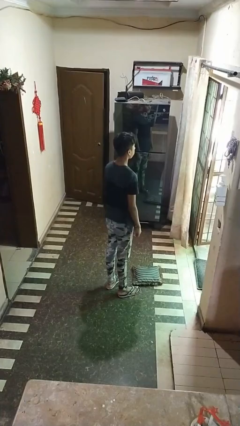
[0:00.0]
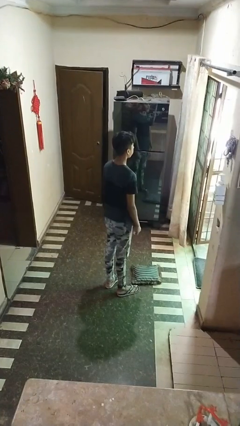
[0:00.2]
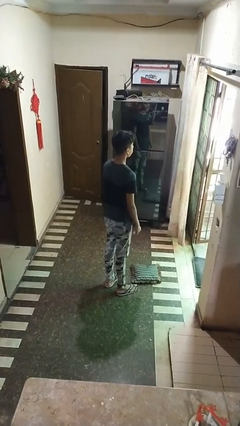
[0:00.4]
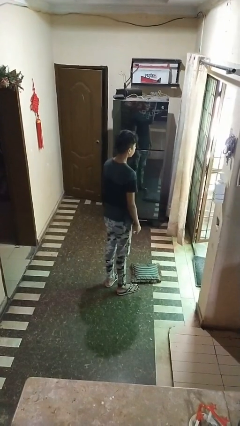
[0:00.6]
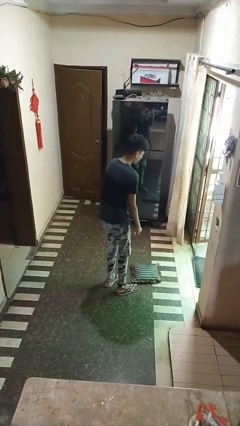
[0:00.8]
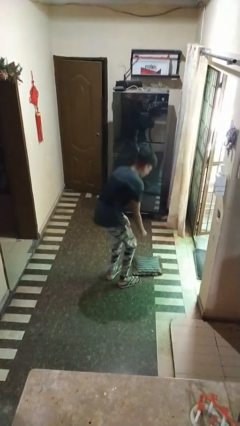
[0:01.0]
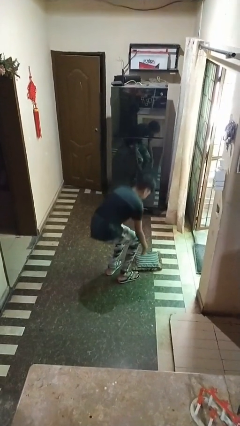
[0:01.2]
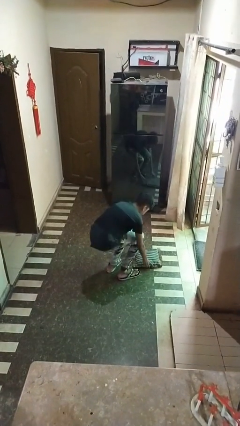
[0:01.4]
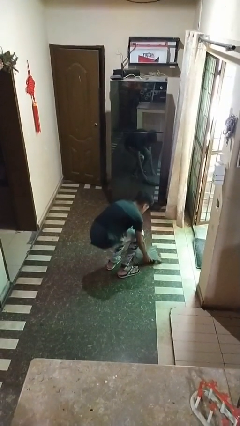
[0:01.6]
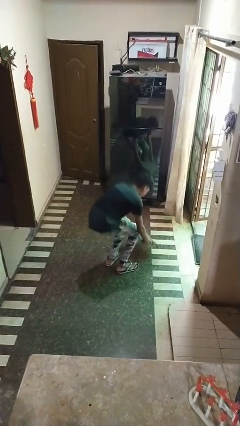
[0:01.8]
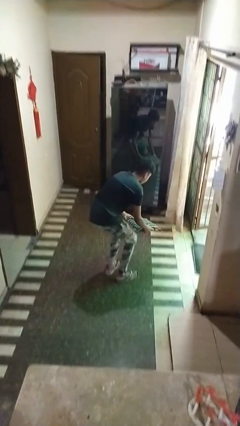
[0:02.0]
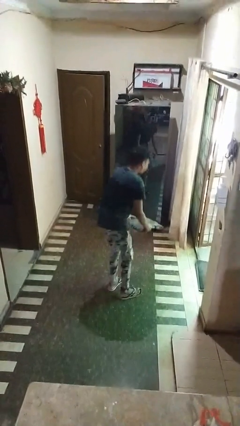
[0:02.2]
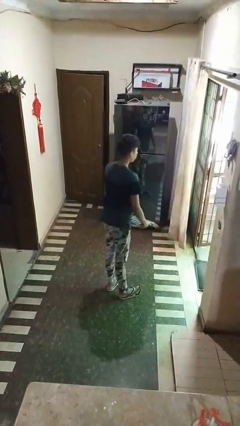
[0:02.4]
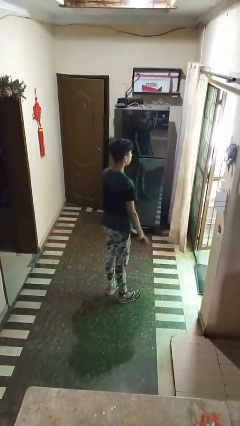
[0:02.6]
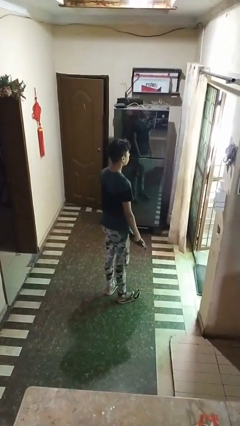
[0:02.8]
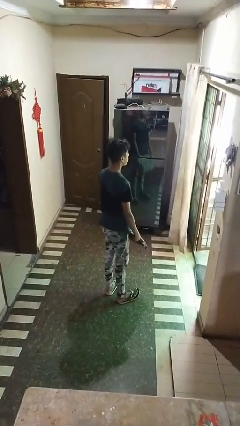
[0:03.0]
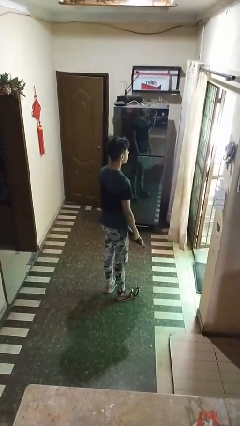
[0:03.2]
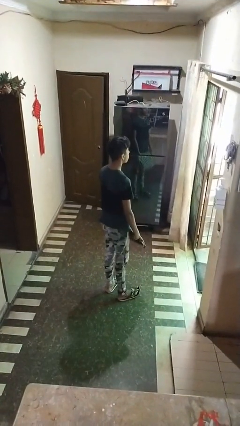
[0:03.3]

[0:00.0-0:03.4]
person picks up object from floor

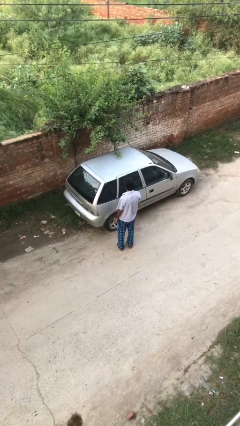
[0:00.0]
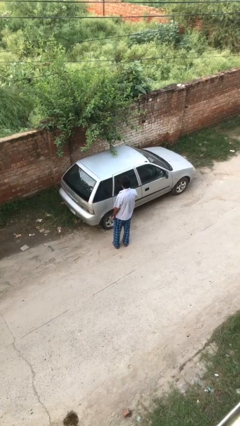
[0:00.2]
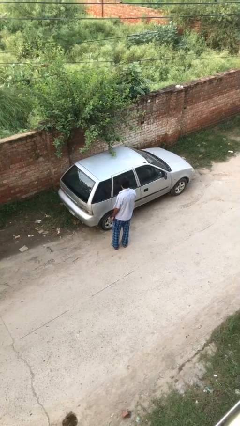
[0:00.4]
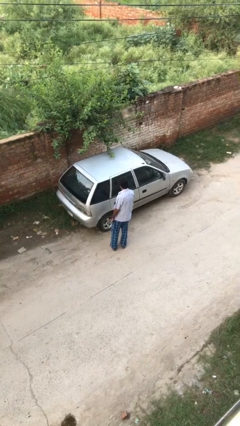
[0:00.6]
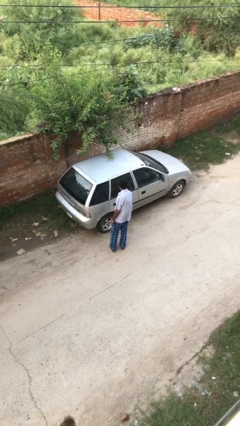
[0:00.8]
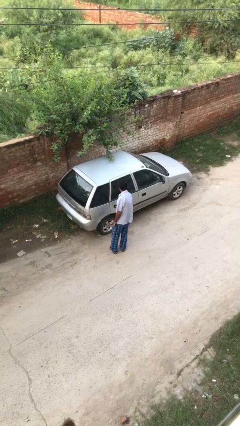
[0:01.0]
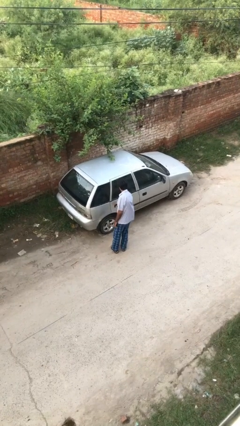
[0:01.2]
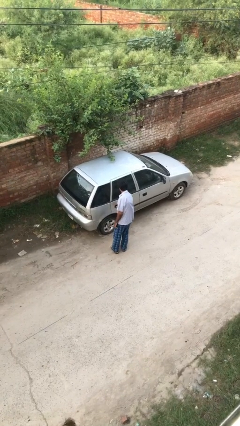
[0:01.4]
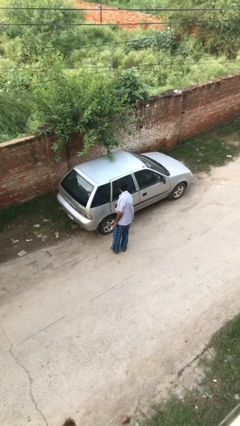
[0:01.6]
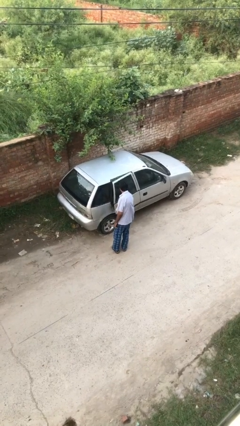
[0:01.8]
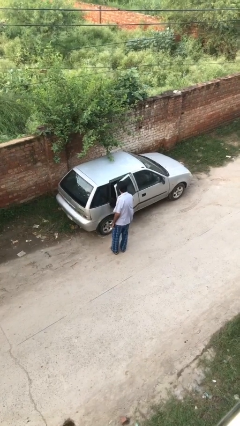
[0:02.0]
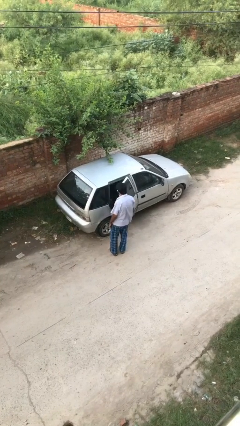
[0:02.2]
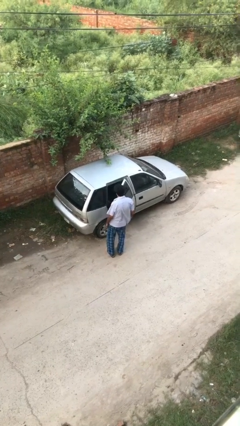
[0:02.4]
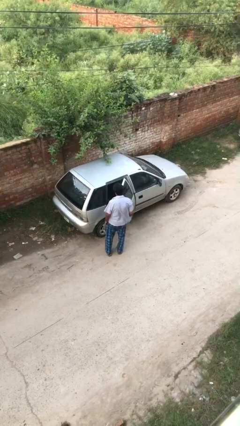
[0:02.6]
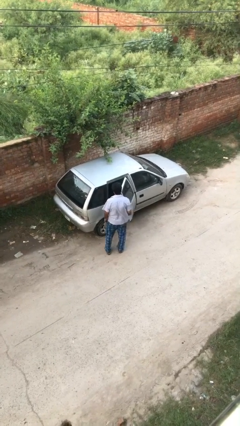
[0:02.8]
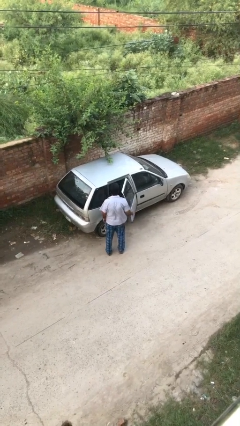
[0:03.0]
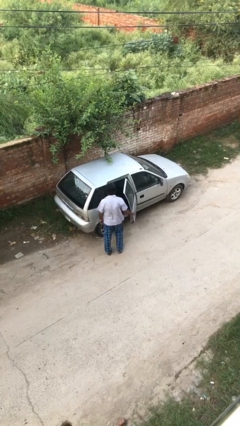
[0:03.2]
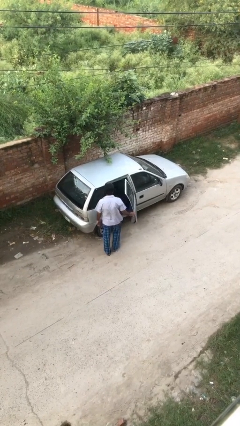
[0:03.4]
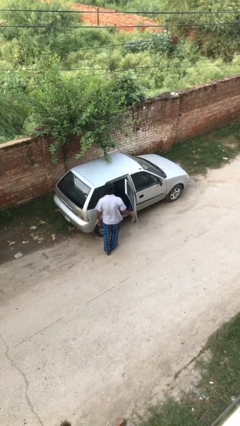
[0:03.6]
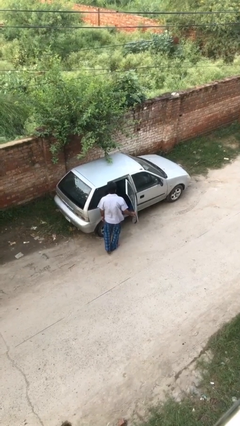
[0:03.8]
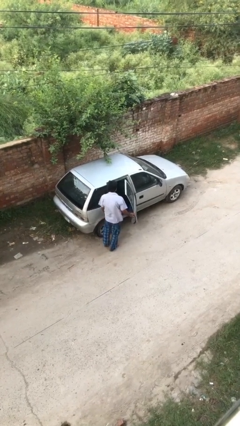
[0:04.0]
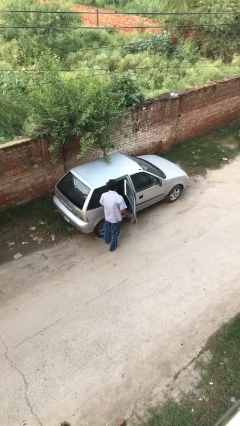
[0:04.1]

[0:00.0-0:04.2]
person opens car door

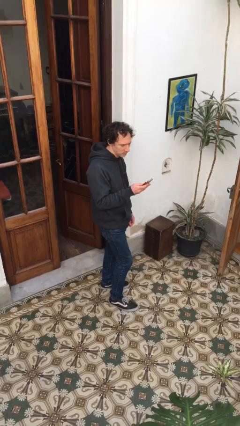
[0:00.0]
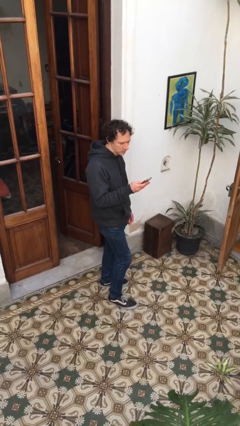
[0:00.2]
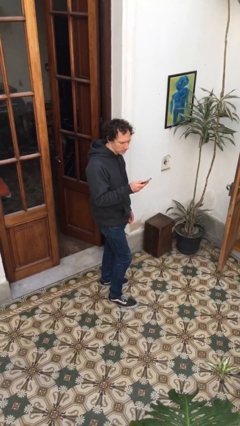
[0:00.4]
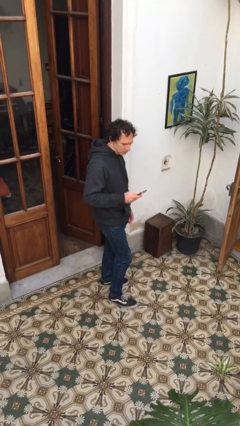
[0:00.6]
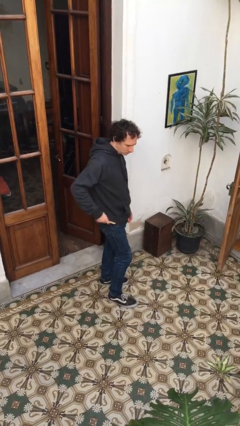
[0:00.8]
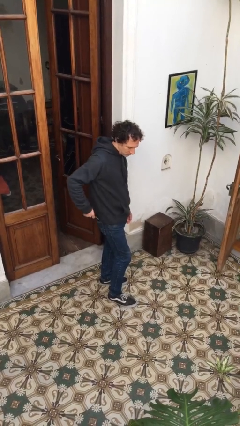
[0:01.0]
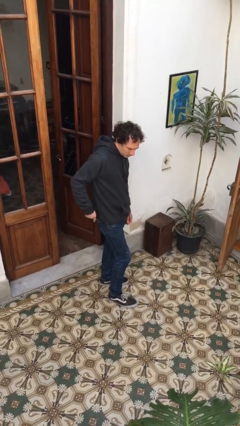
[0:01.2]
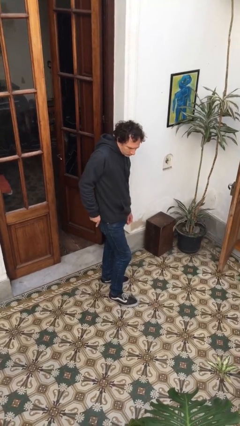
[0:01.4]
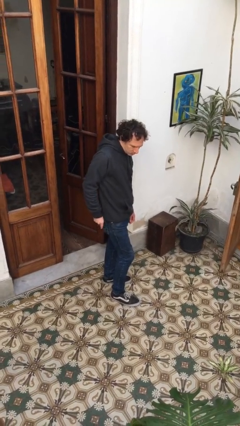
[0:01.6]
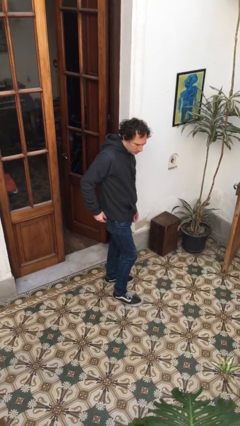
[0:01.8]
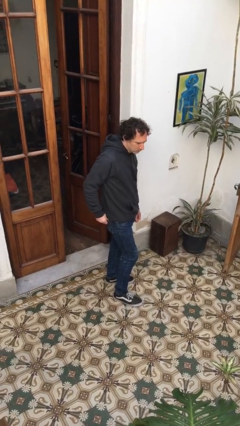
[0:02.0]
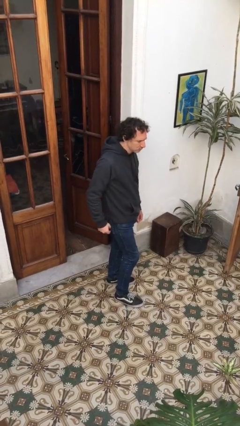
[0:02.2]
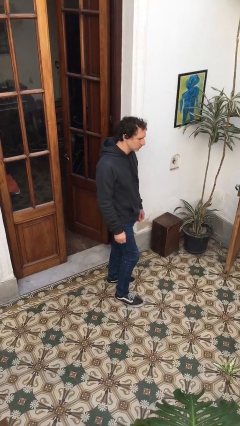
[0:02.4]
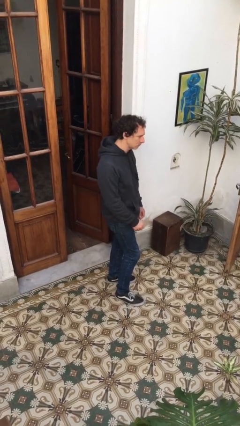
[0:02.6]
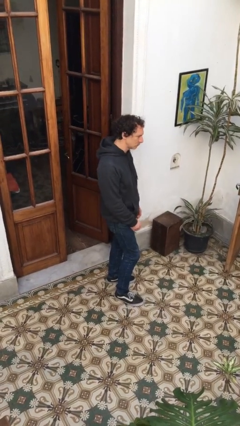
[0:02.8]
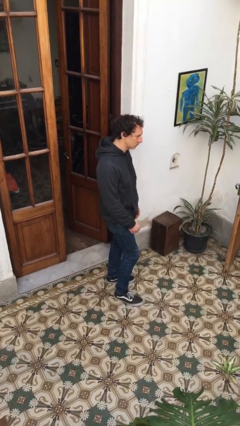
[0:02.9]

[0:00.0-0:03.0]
person puts phone into pocket

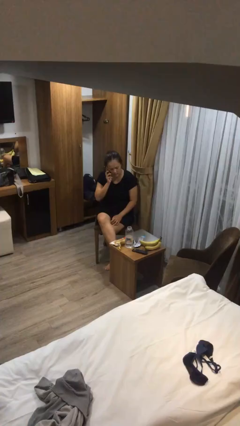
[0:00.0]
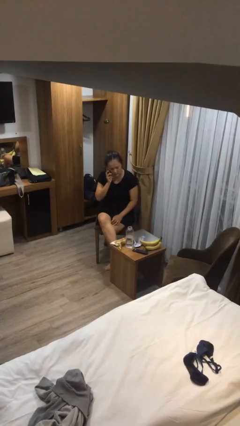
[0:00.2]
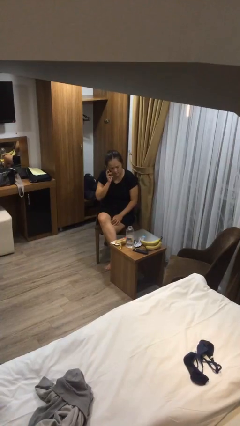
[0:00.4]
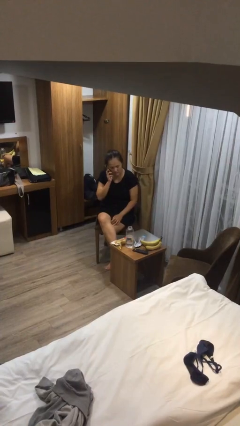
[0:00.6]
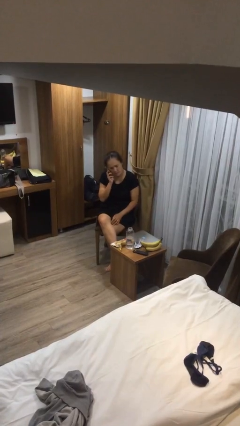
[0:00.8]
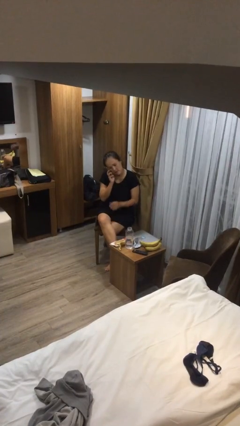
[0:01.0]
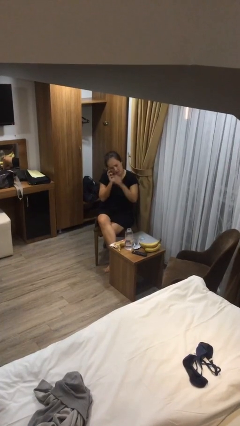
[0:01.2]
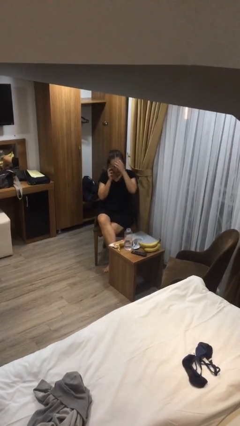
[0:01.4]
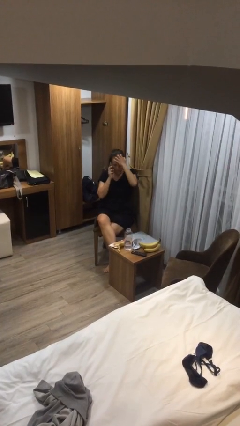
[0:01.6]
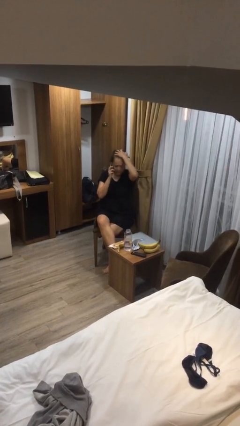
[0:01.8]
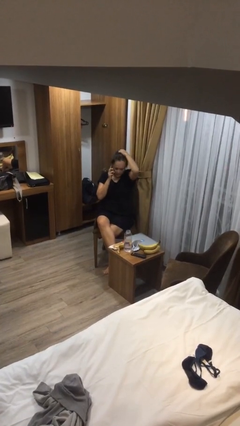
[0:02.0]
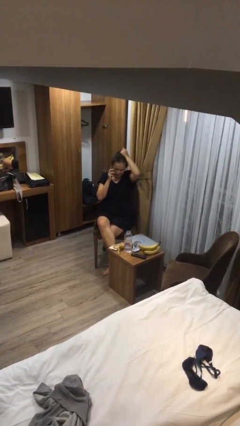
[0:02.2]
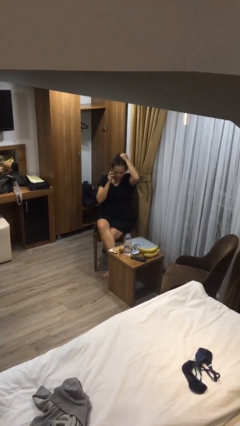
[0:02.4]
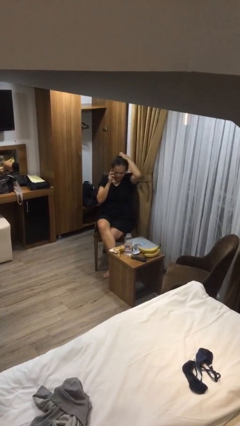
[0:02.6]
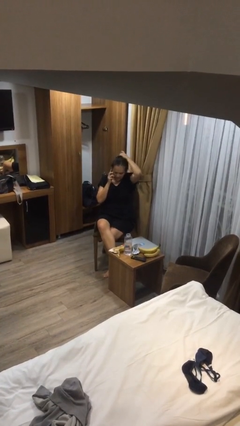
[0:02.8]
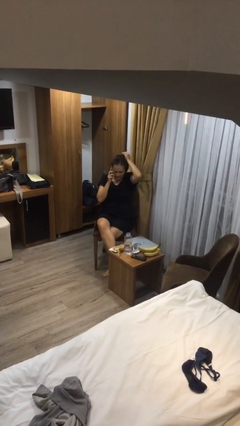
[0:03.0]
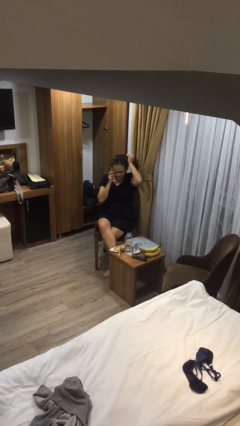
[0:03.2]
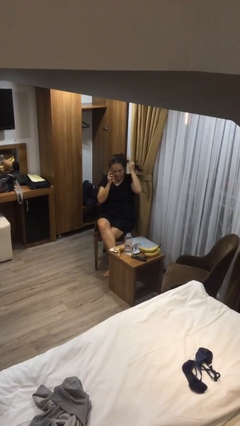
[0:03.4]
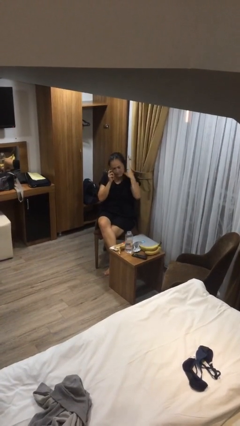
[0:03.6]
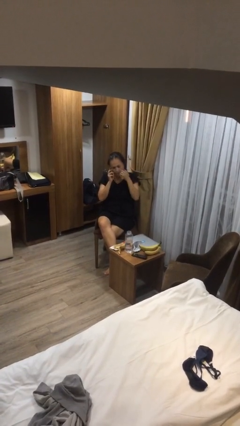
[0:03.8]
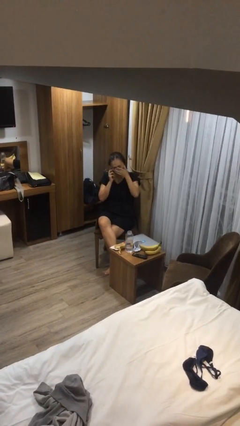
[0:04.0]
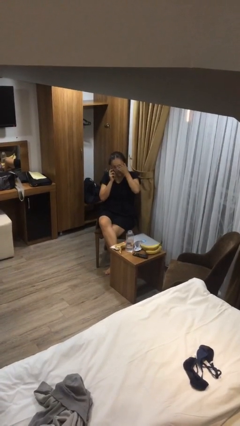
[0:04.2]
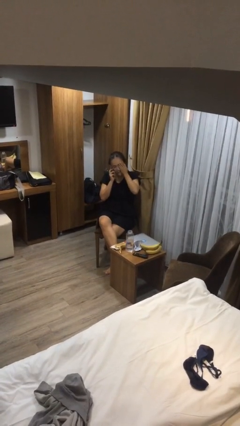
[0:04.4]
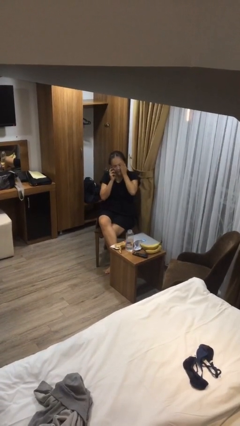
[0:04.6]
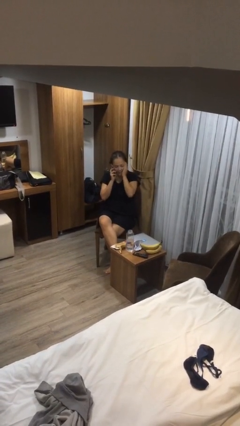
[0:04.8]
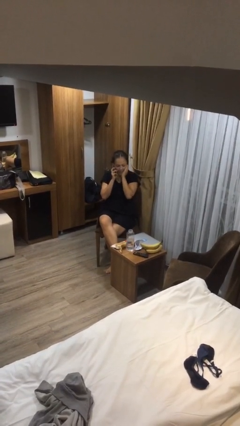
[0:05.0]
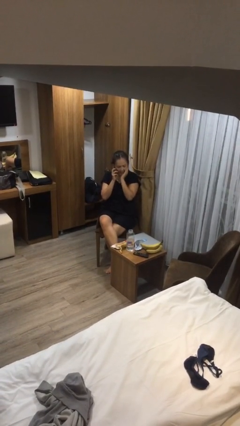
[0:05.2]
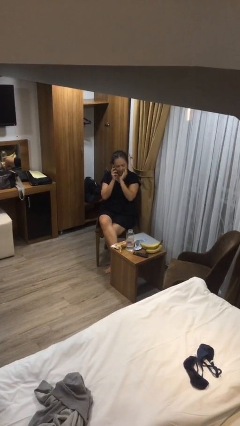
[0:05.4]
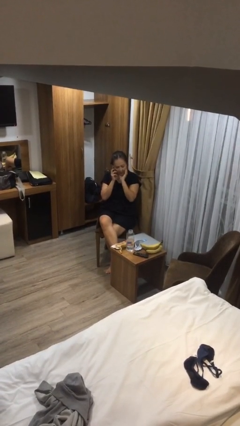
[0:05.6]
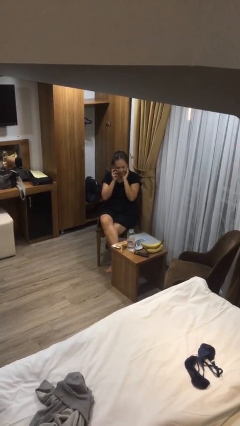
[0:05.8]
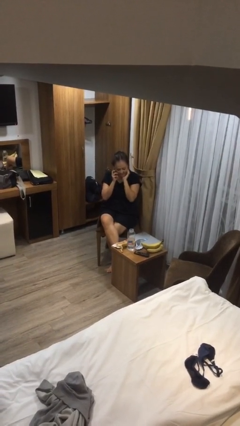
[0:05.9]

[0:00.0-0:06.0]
person talks on phone

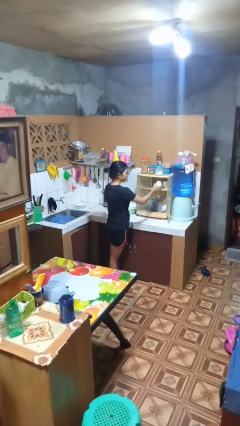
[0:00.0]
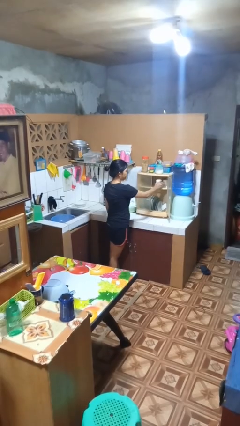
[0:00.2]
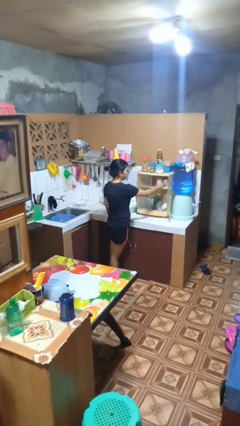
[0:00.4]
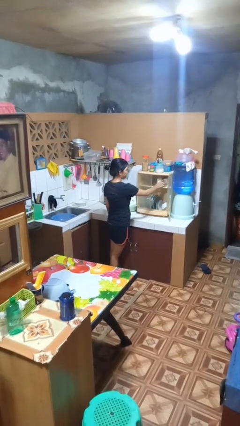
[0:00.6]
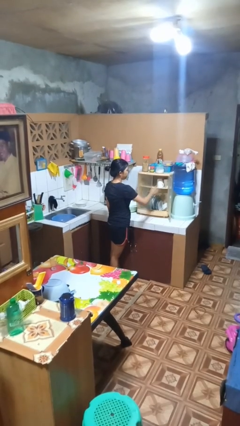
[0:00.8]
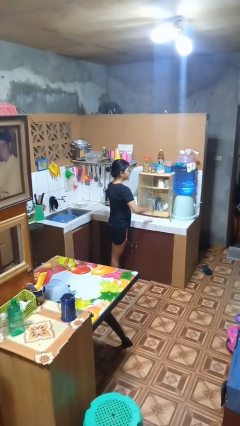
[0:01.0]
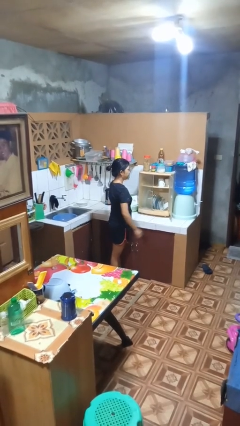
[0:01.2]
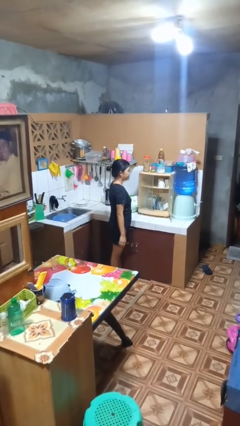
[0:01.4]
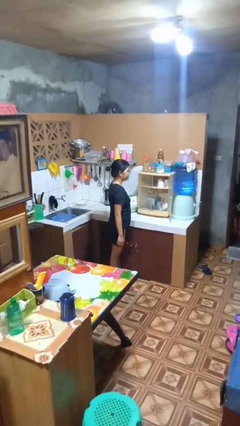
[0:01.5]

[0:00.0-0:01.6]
person puts object into kitchen drawer
